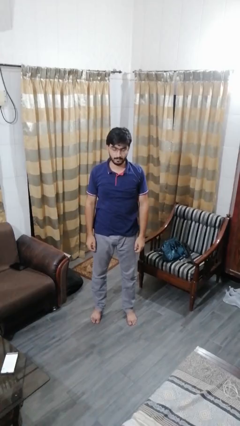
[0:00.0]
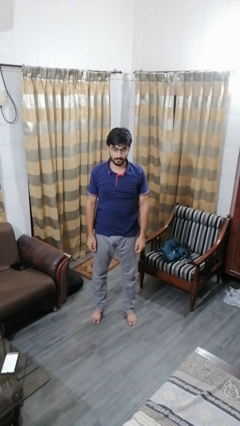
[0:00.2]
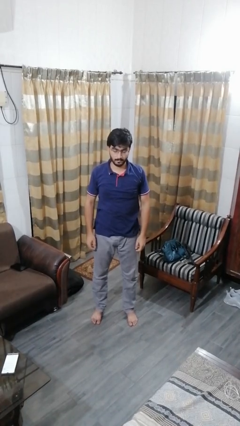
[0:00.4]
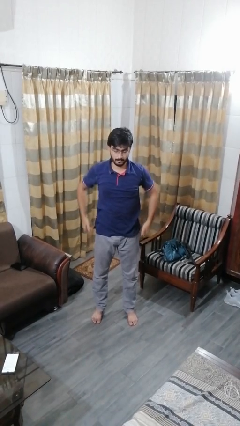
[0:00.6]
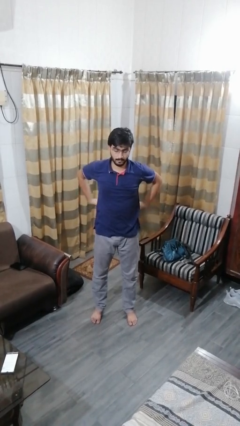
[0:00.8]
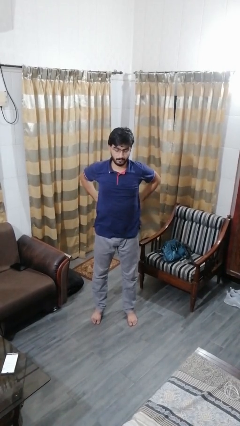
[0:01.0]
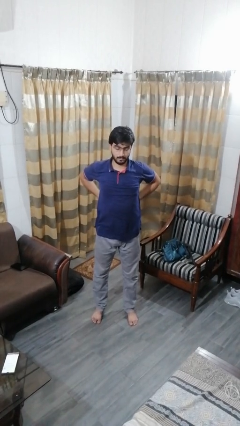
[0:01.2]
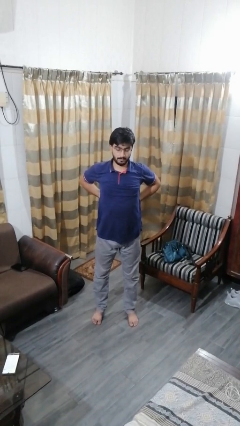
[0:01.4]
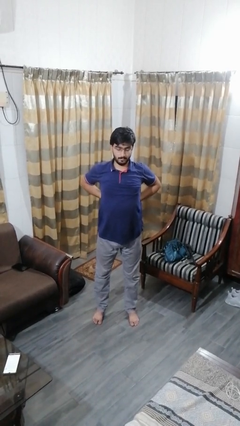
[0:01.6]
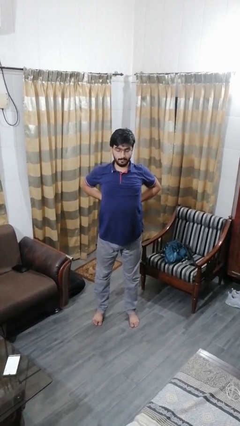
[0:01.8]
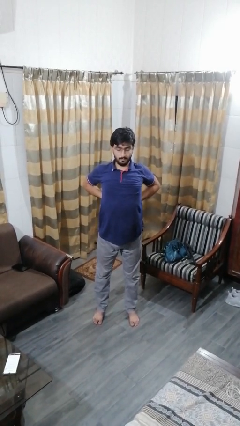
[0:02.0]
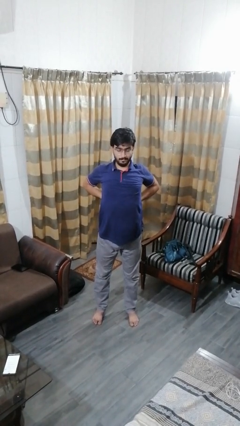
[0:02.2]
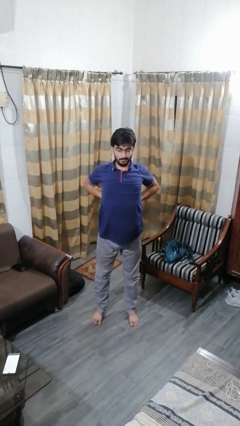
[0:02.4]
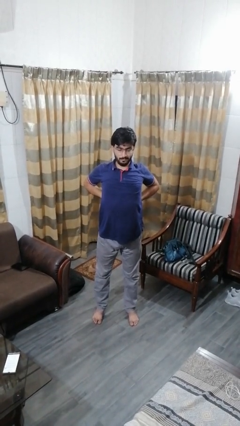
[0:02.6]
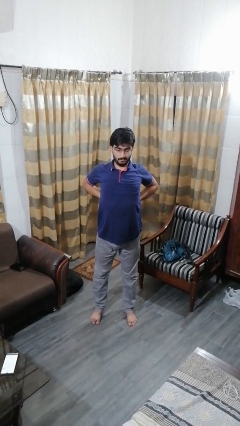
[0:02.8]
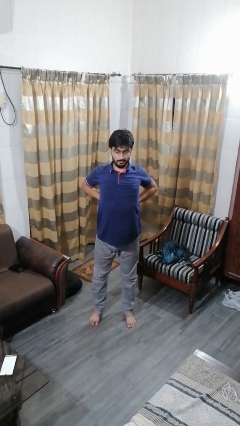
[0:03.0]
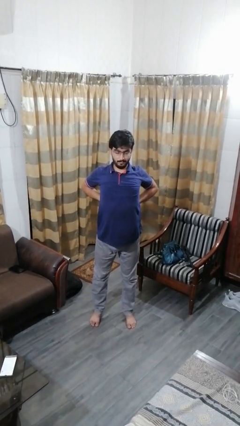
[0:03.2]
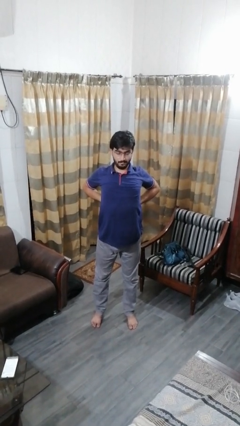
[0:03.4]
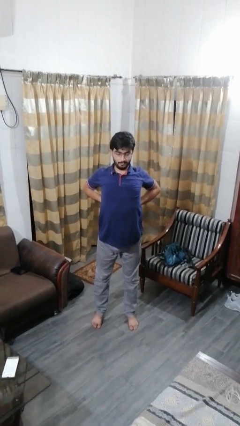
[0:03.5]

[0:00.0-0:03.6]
person stretches back

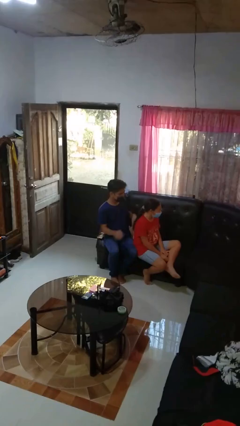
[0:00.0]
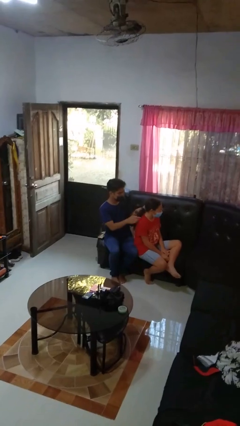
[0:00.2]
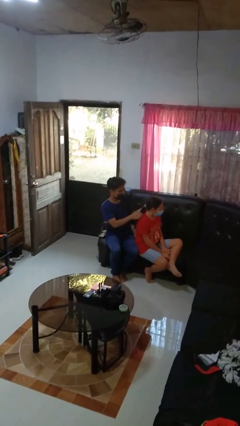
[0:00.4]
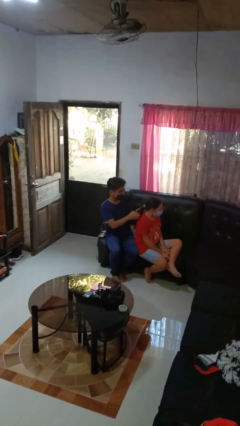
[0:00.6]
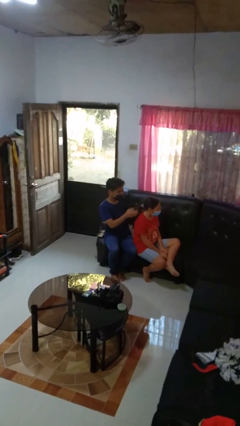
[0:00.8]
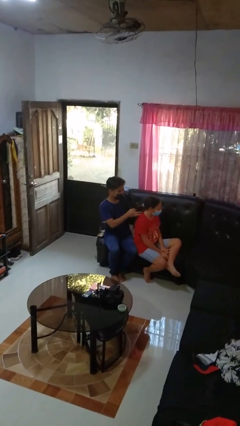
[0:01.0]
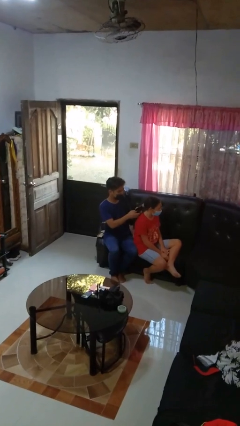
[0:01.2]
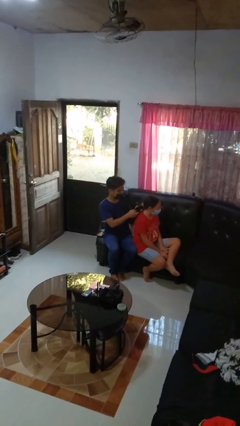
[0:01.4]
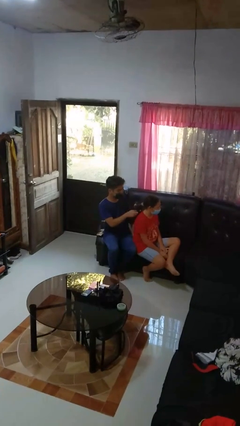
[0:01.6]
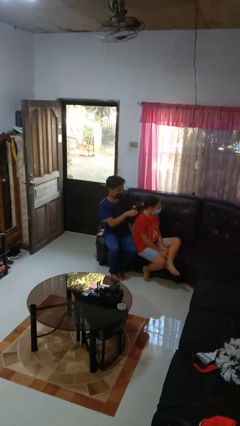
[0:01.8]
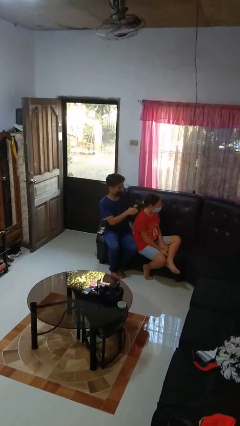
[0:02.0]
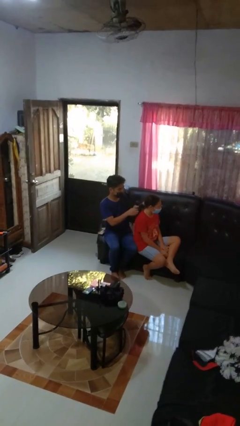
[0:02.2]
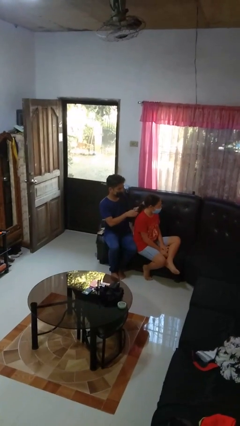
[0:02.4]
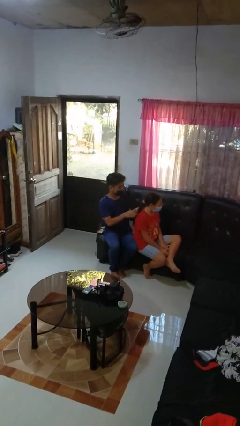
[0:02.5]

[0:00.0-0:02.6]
person braids hair of person

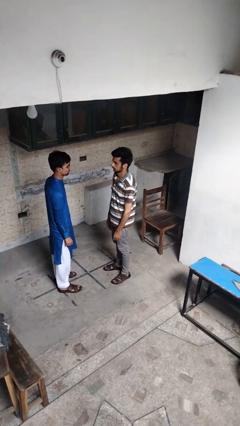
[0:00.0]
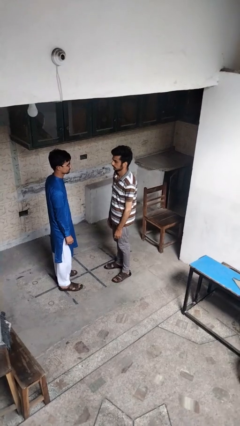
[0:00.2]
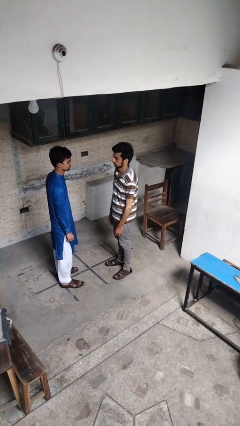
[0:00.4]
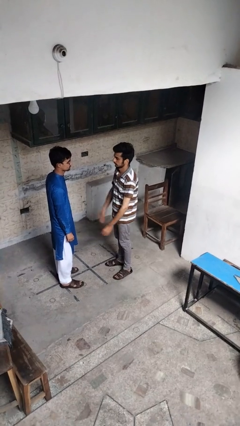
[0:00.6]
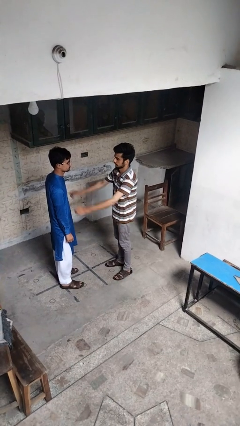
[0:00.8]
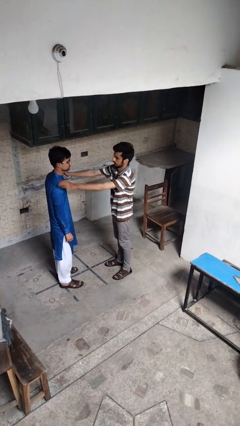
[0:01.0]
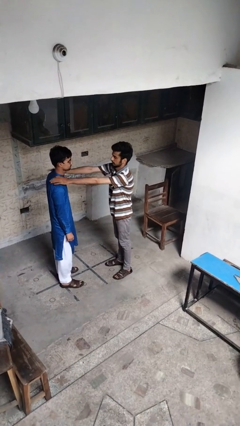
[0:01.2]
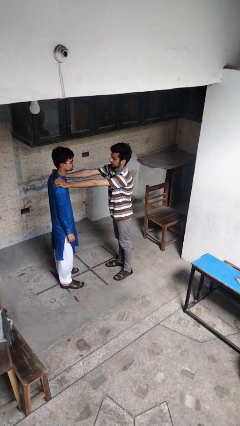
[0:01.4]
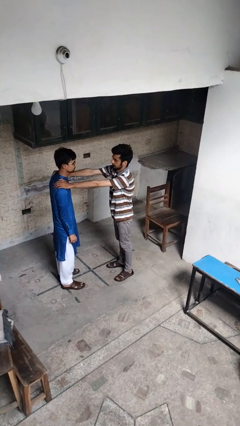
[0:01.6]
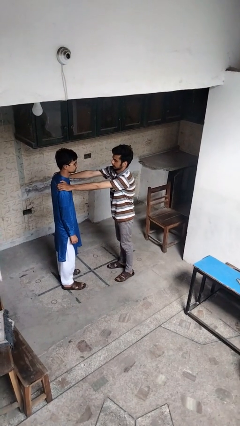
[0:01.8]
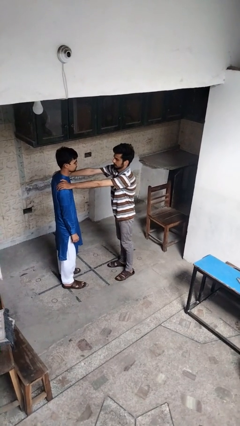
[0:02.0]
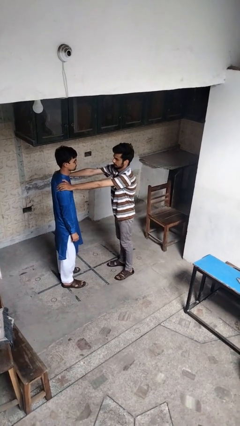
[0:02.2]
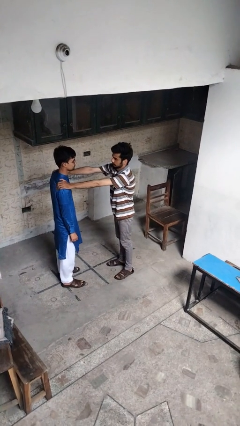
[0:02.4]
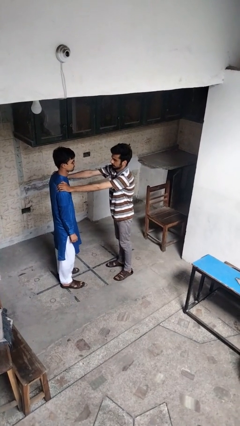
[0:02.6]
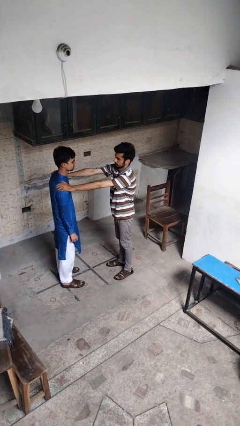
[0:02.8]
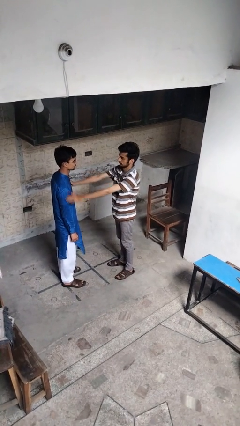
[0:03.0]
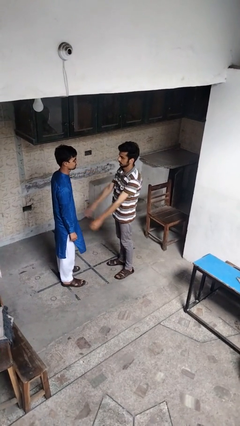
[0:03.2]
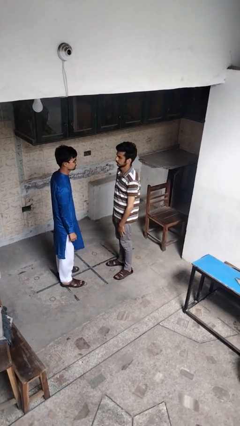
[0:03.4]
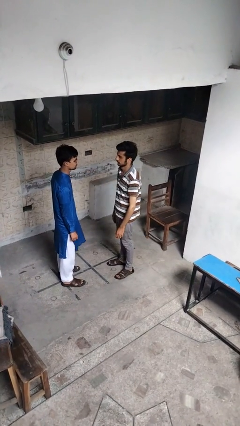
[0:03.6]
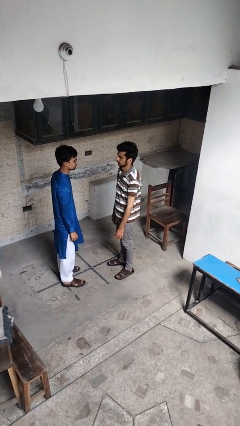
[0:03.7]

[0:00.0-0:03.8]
person pounds shoulders of person

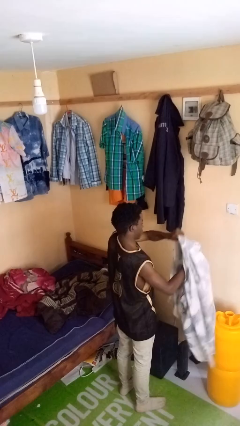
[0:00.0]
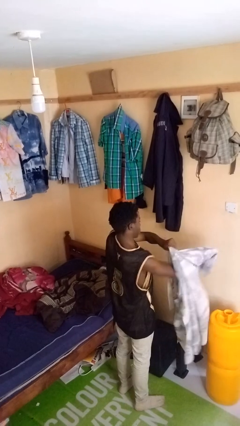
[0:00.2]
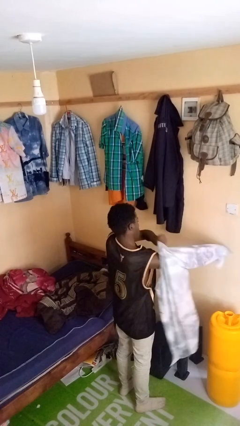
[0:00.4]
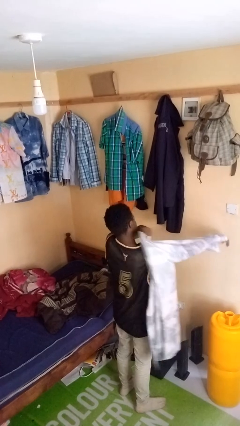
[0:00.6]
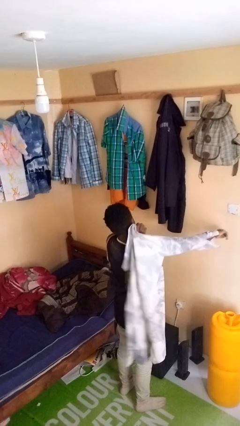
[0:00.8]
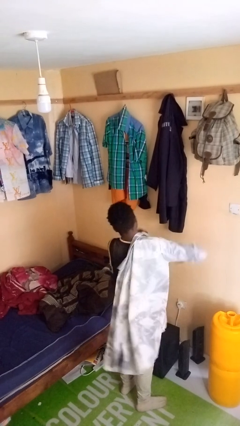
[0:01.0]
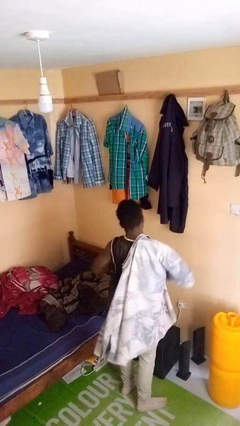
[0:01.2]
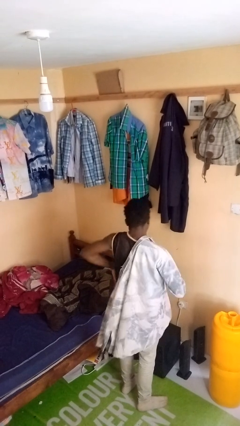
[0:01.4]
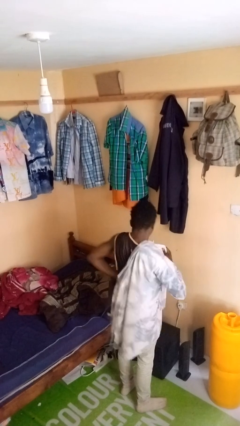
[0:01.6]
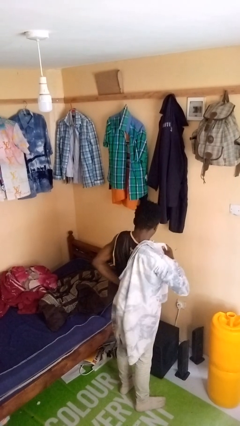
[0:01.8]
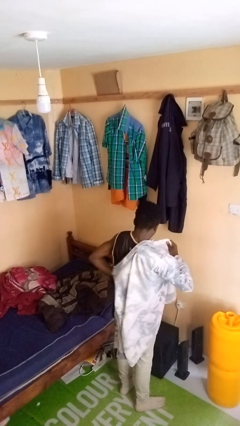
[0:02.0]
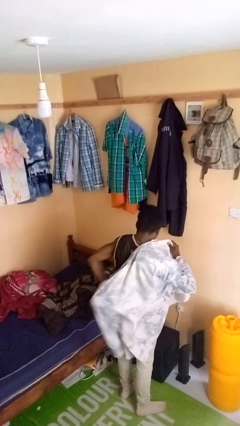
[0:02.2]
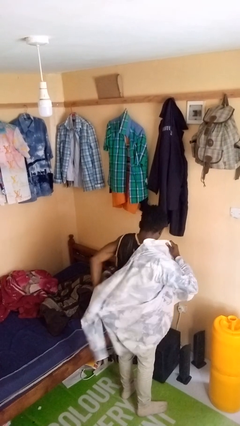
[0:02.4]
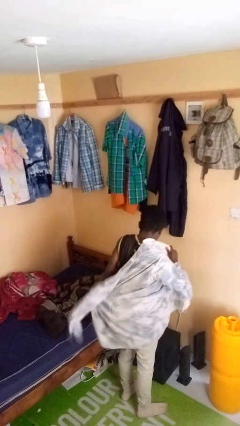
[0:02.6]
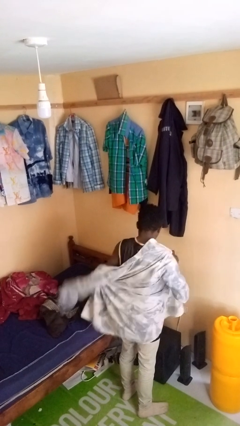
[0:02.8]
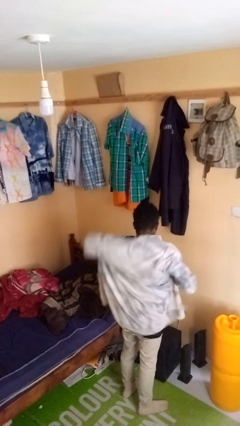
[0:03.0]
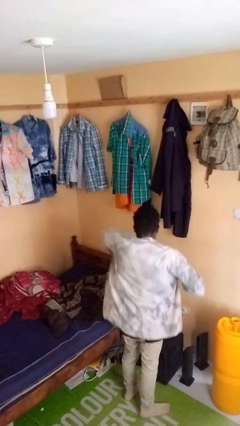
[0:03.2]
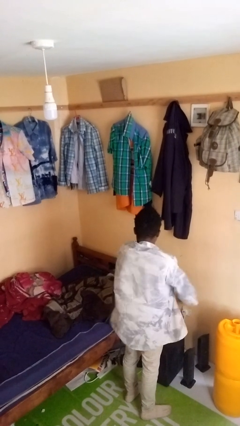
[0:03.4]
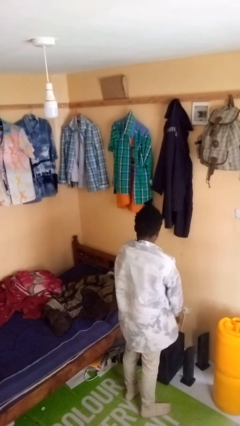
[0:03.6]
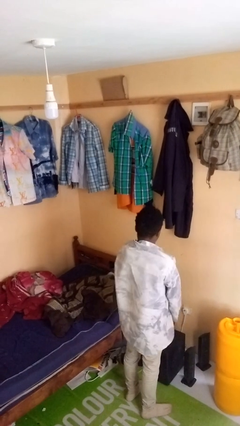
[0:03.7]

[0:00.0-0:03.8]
person puts on shirt

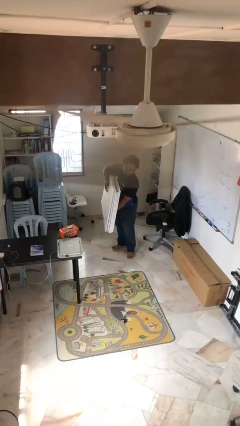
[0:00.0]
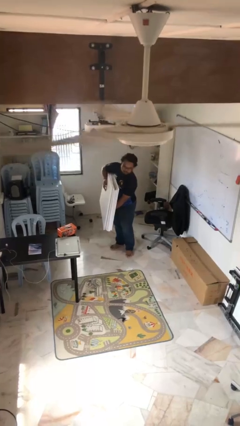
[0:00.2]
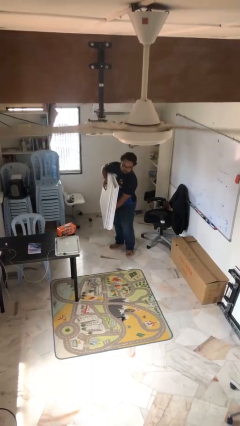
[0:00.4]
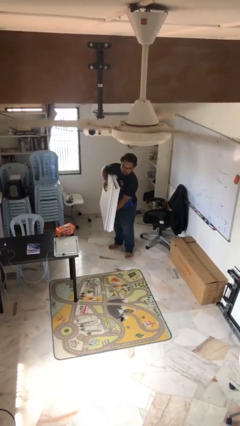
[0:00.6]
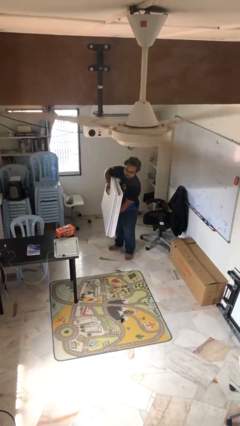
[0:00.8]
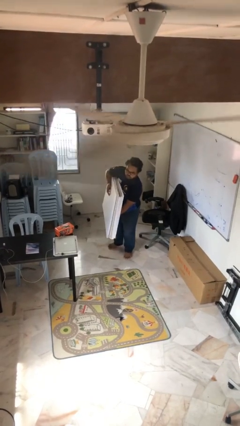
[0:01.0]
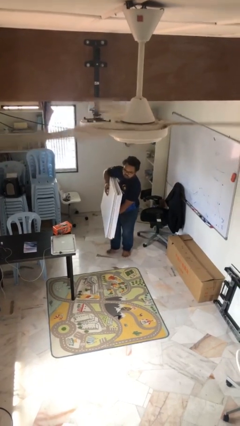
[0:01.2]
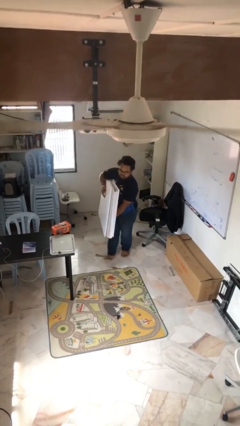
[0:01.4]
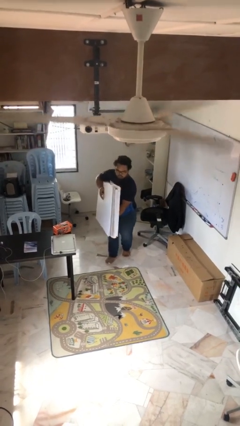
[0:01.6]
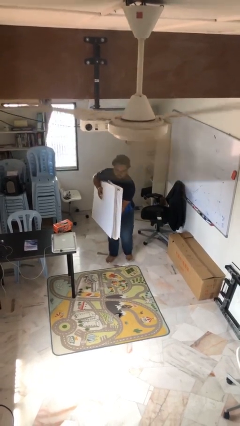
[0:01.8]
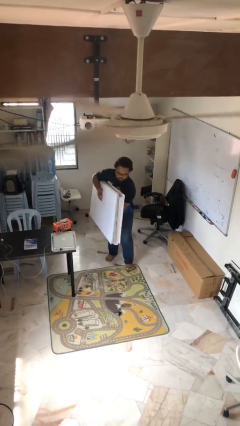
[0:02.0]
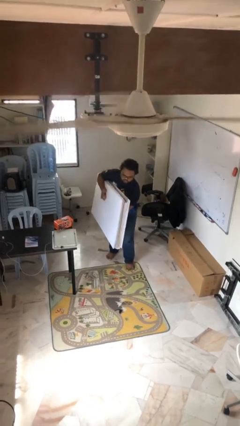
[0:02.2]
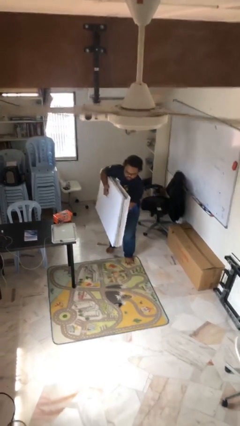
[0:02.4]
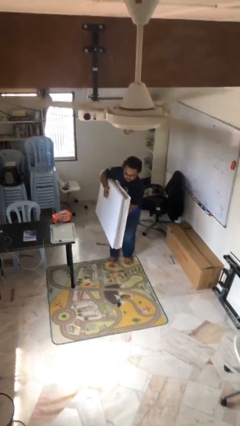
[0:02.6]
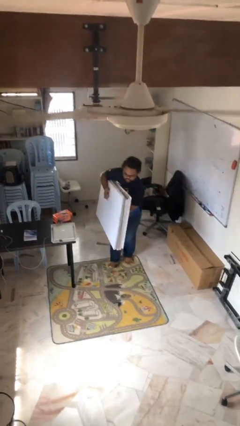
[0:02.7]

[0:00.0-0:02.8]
person carries heavy object

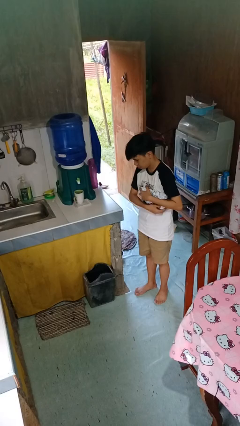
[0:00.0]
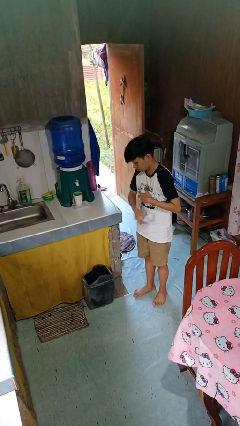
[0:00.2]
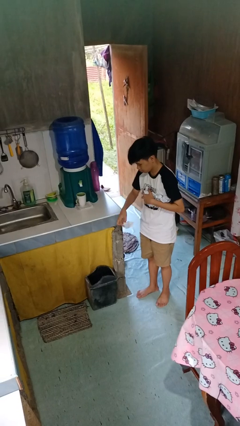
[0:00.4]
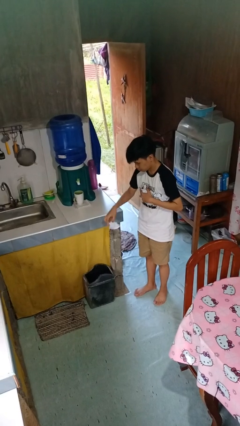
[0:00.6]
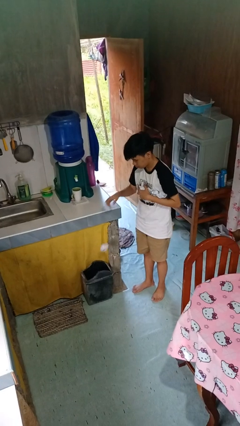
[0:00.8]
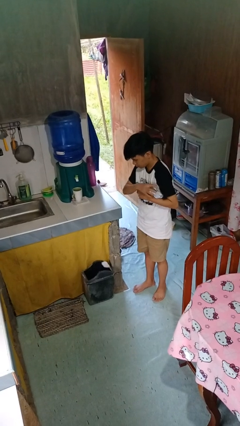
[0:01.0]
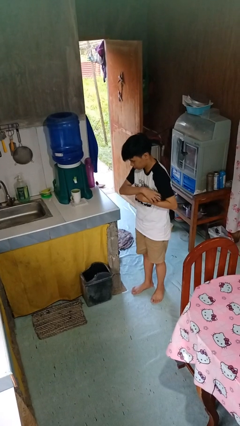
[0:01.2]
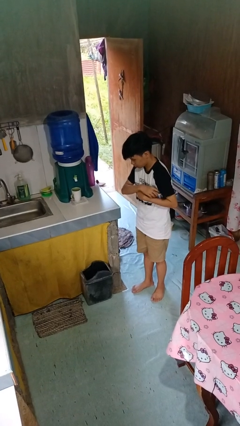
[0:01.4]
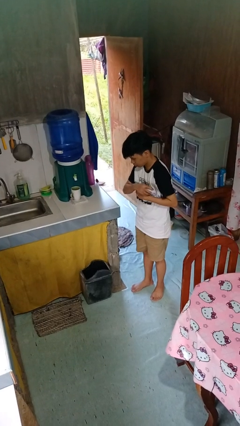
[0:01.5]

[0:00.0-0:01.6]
person discards trash
